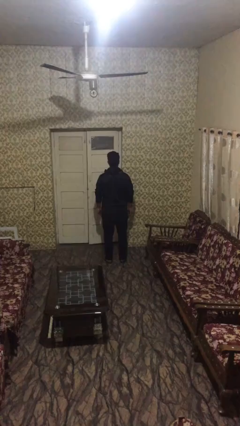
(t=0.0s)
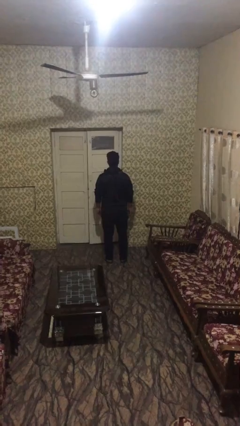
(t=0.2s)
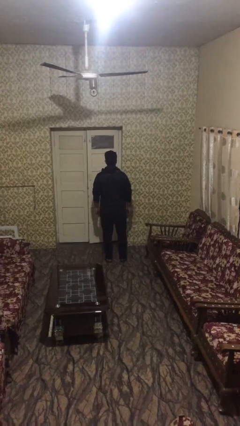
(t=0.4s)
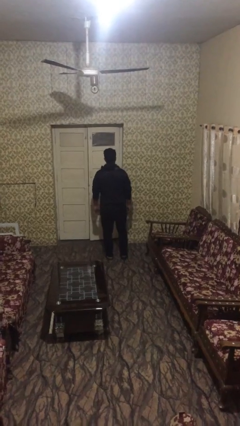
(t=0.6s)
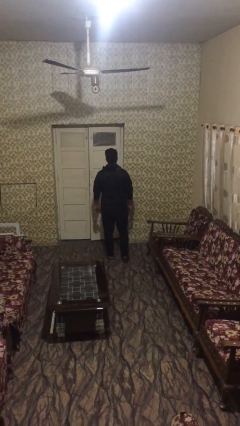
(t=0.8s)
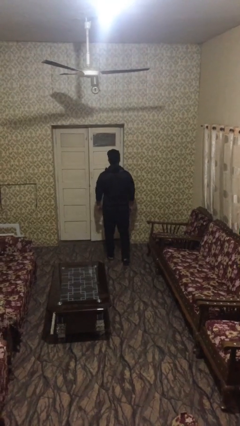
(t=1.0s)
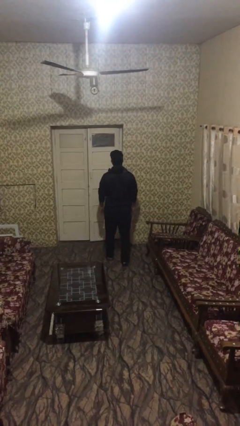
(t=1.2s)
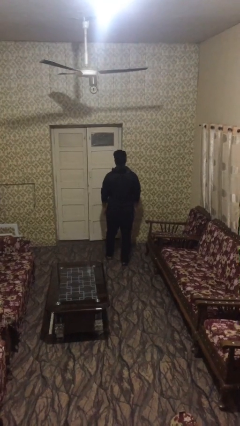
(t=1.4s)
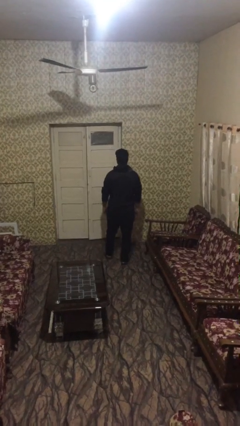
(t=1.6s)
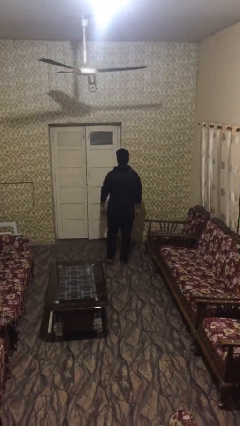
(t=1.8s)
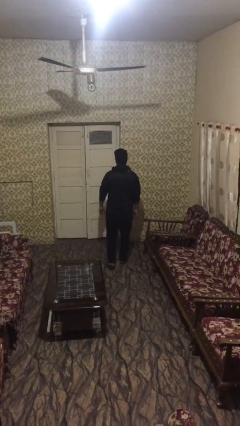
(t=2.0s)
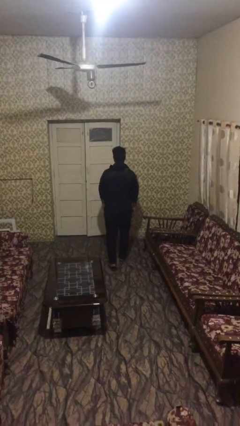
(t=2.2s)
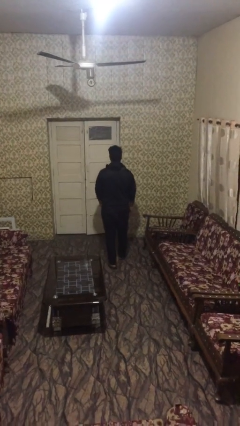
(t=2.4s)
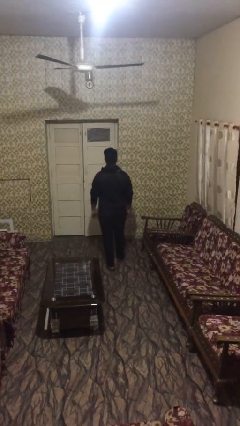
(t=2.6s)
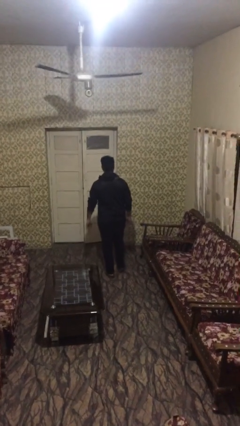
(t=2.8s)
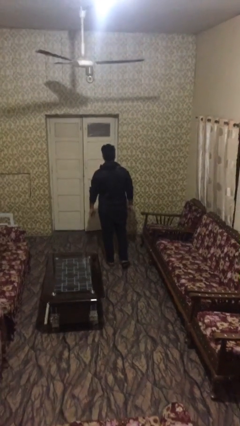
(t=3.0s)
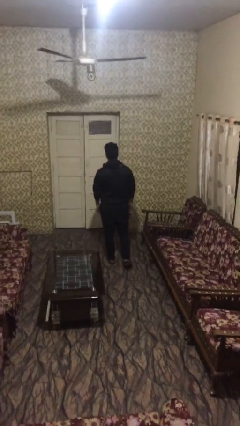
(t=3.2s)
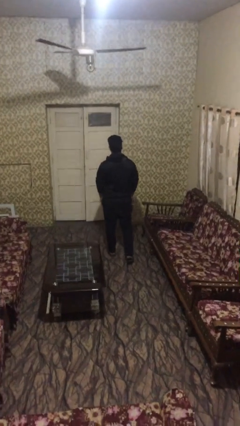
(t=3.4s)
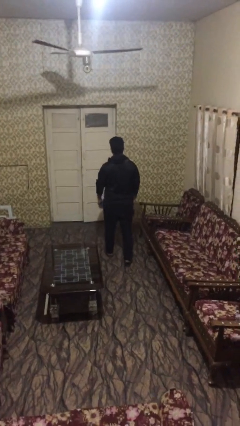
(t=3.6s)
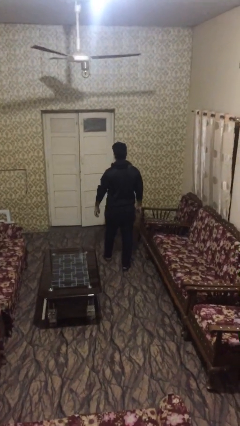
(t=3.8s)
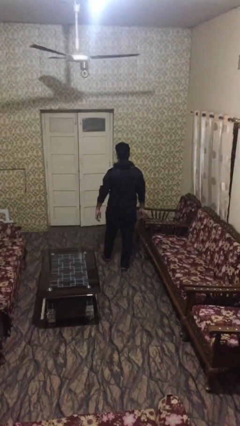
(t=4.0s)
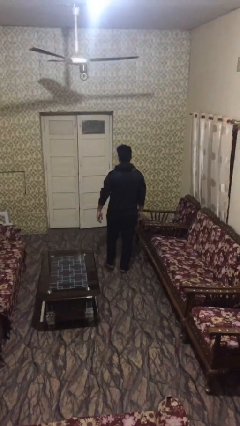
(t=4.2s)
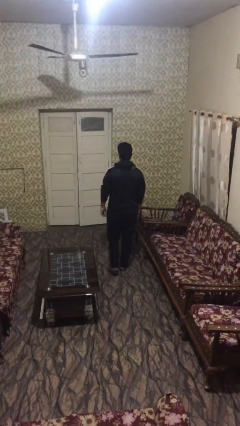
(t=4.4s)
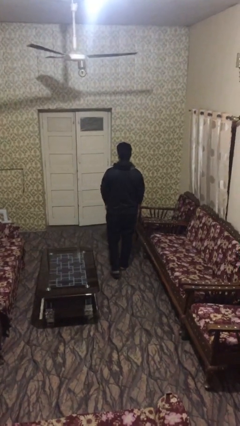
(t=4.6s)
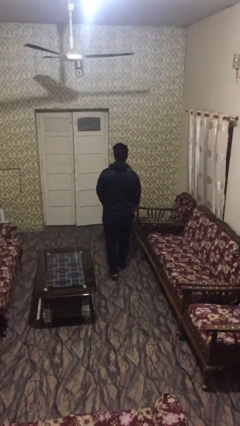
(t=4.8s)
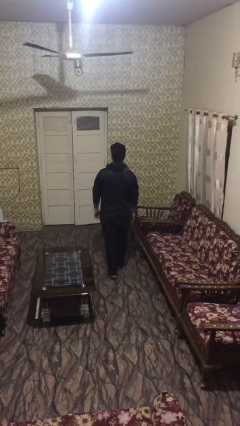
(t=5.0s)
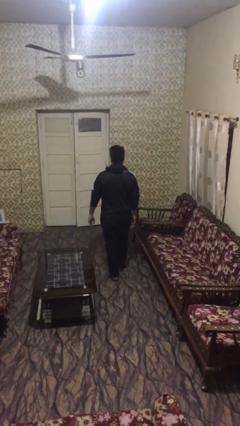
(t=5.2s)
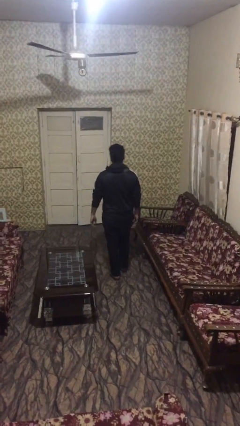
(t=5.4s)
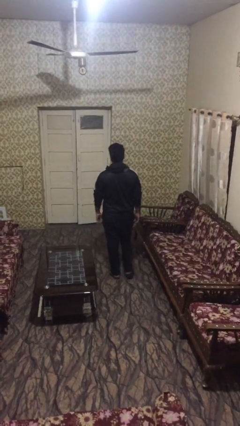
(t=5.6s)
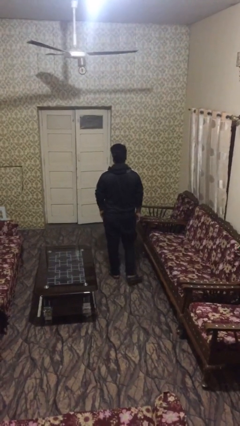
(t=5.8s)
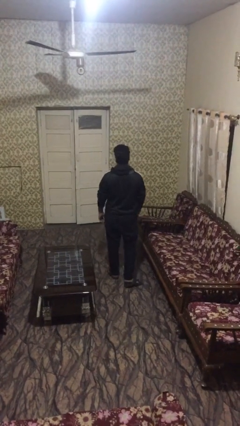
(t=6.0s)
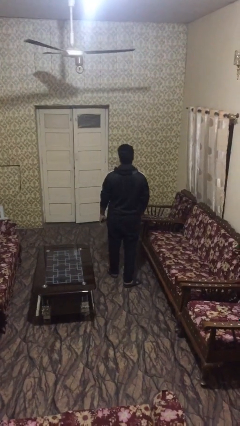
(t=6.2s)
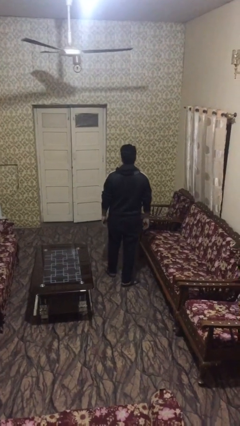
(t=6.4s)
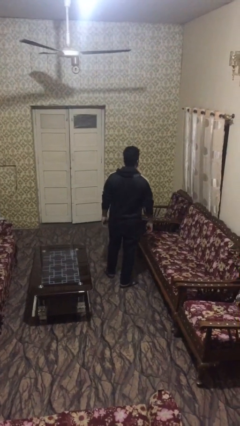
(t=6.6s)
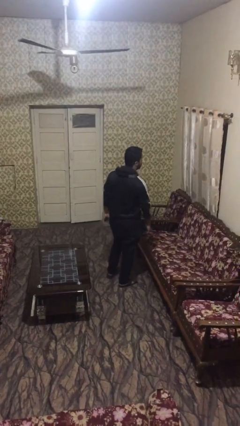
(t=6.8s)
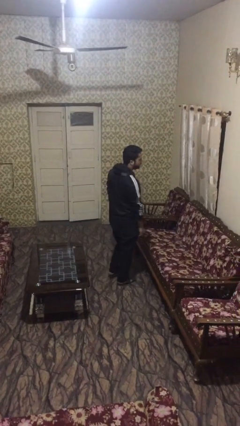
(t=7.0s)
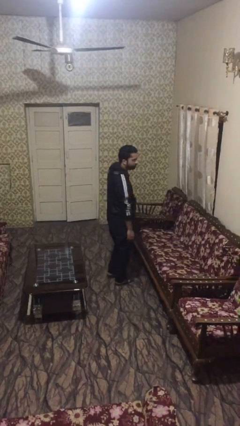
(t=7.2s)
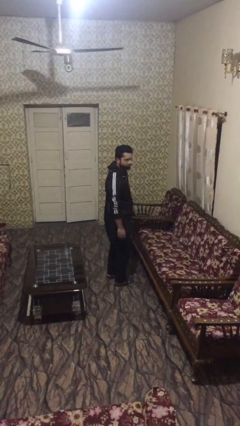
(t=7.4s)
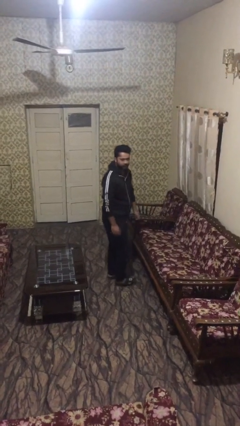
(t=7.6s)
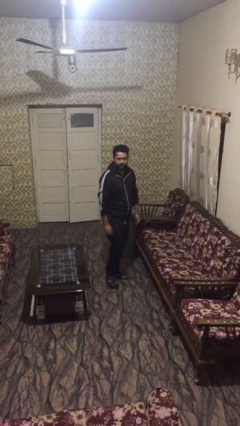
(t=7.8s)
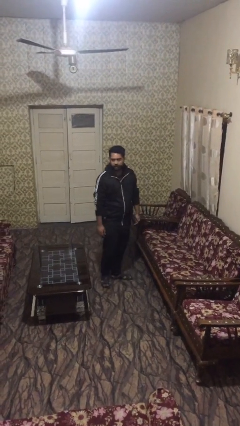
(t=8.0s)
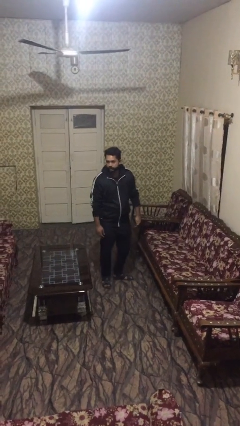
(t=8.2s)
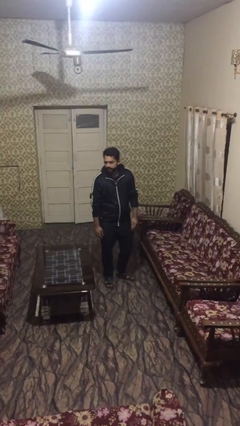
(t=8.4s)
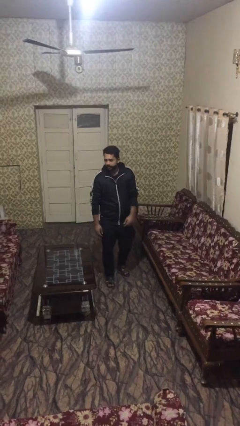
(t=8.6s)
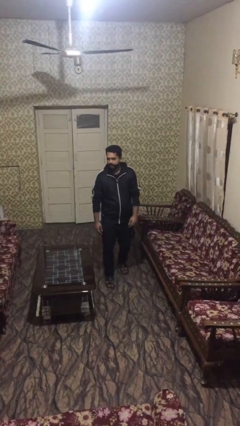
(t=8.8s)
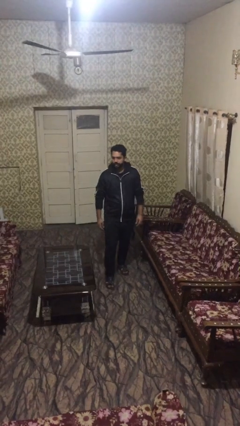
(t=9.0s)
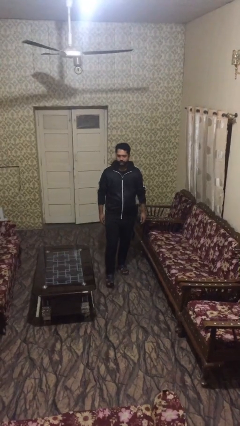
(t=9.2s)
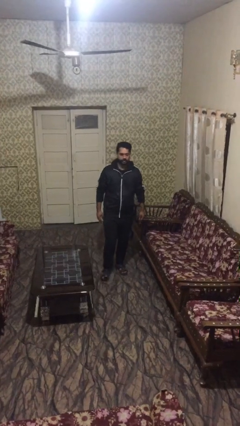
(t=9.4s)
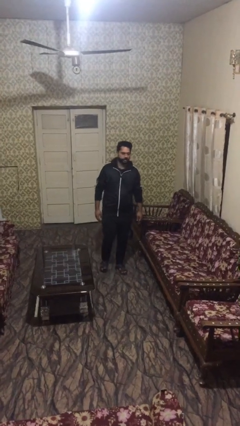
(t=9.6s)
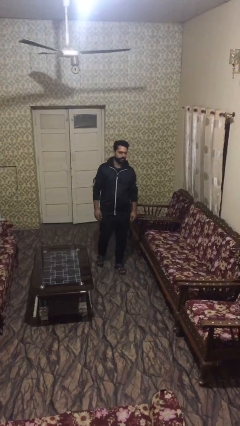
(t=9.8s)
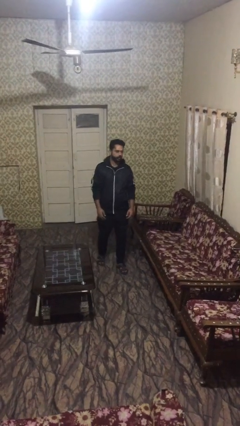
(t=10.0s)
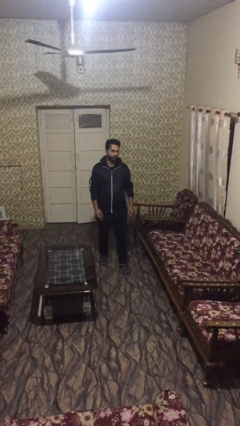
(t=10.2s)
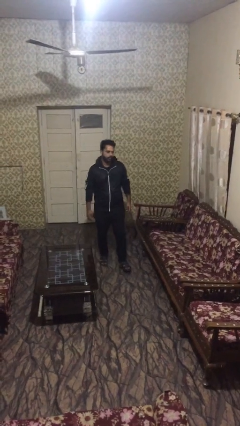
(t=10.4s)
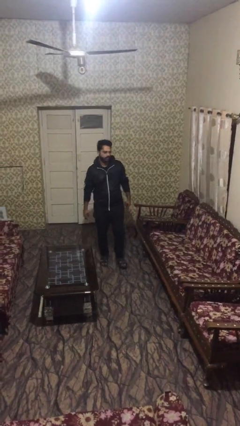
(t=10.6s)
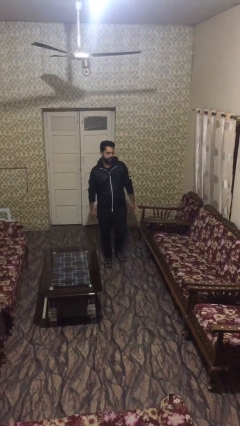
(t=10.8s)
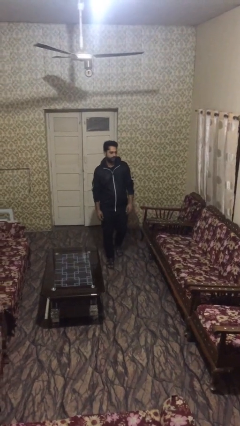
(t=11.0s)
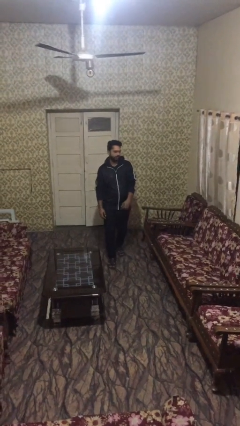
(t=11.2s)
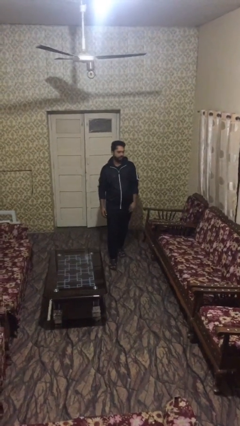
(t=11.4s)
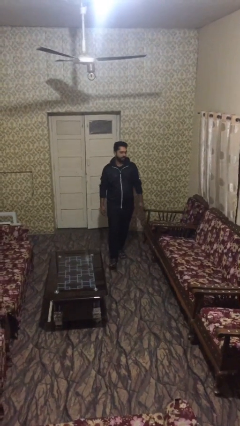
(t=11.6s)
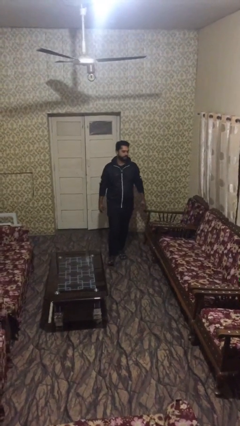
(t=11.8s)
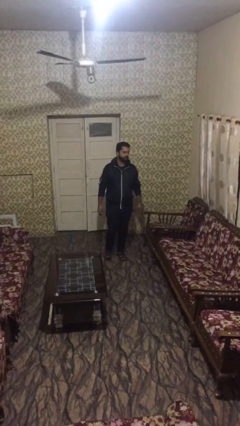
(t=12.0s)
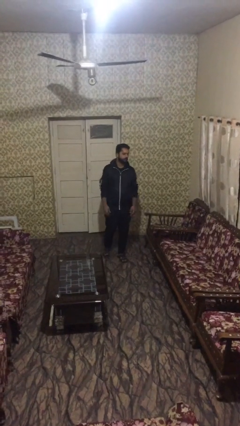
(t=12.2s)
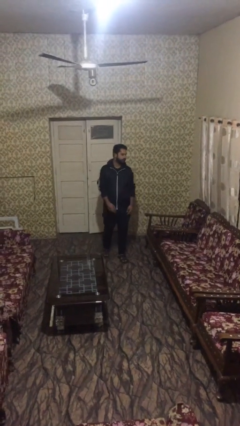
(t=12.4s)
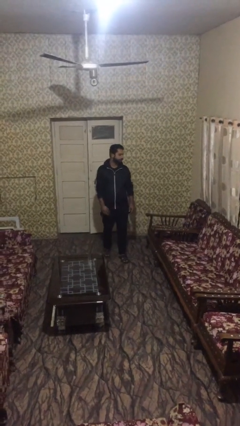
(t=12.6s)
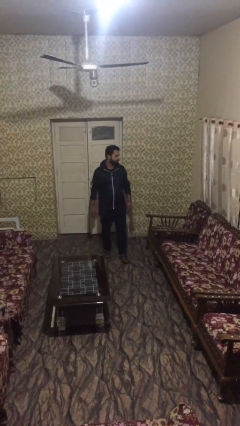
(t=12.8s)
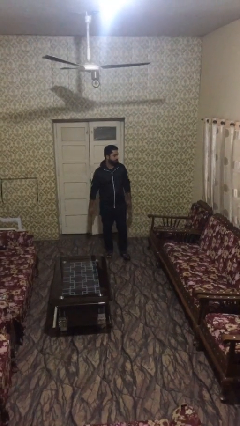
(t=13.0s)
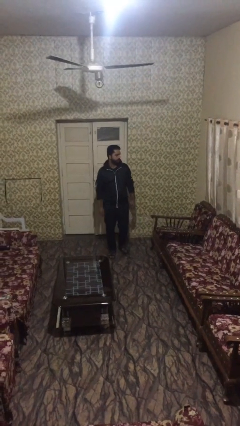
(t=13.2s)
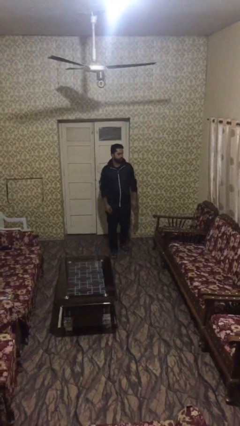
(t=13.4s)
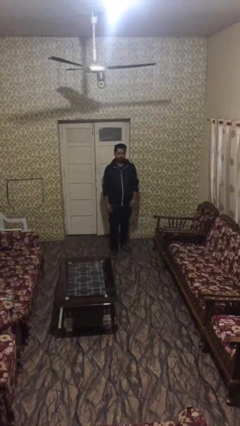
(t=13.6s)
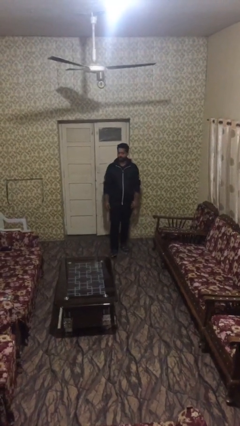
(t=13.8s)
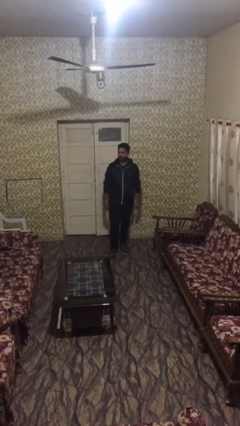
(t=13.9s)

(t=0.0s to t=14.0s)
person walks

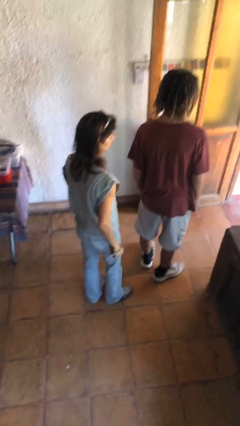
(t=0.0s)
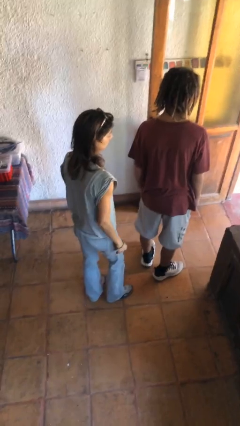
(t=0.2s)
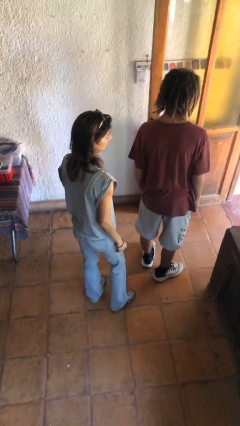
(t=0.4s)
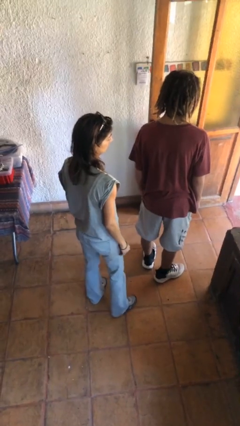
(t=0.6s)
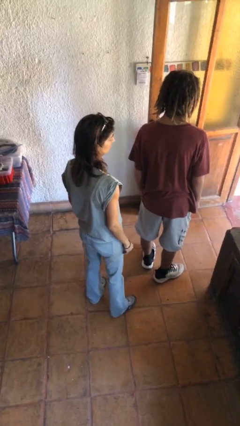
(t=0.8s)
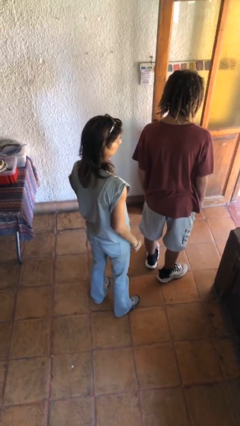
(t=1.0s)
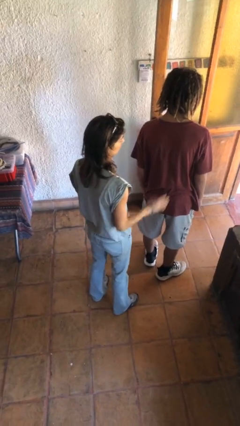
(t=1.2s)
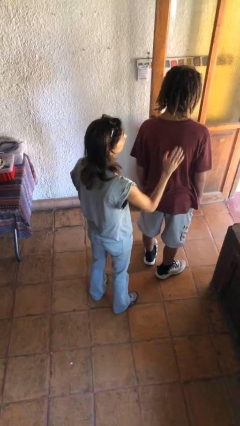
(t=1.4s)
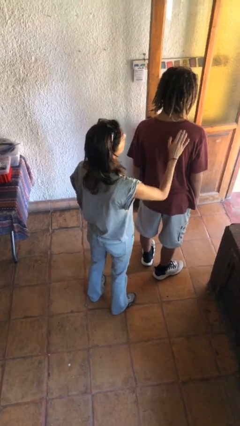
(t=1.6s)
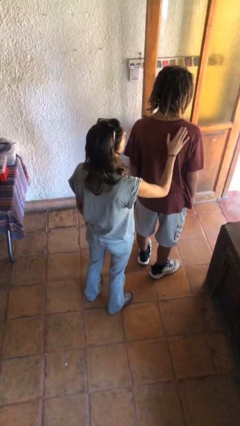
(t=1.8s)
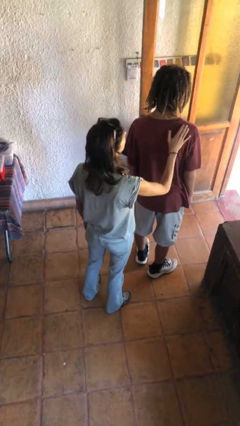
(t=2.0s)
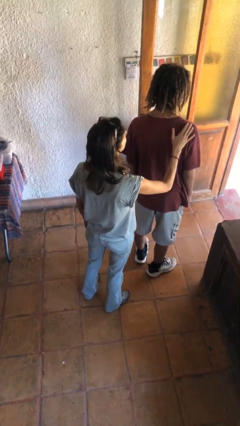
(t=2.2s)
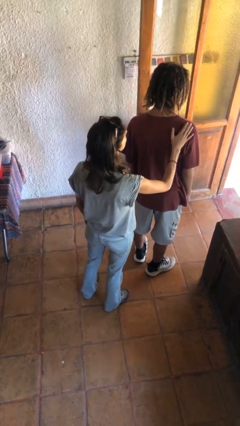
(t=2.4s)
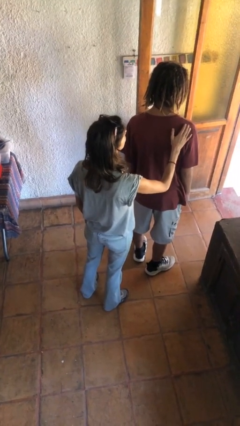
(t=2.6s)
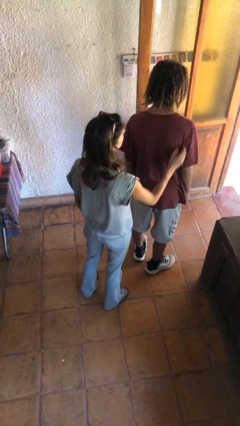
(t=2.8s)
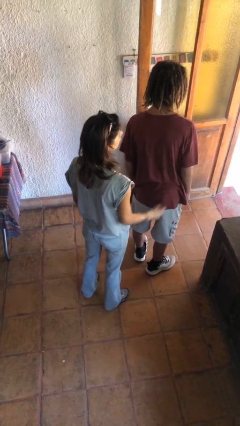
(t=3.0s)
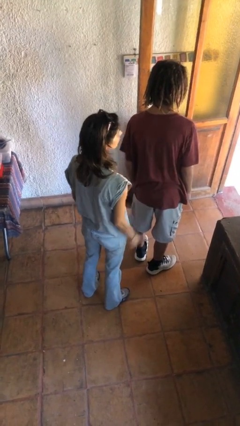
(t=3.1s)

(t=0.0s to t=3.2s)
person touches back of person

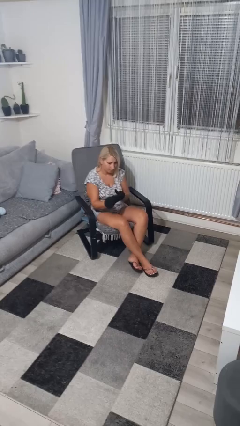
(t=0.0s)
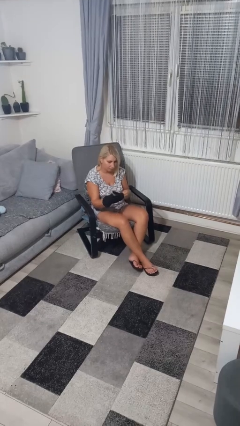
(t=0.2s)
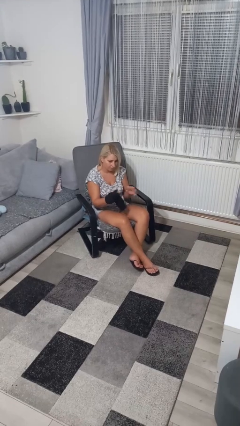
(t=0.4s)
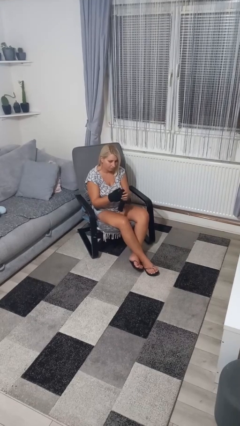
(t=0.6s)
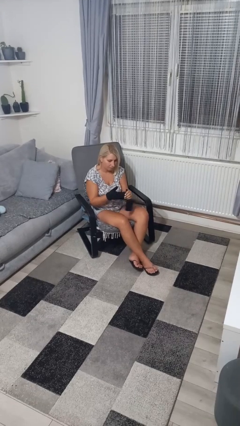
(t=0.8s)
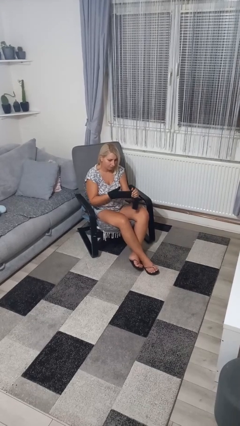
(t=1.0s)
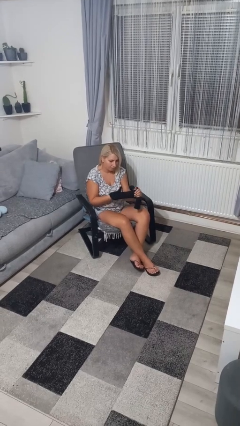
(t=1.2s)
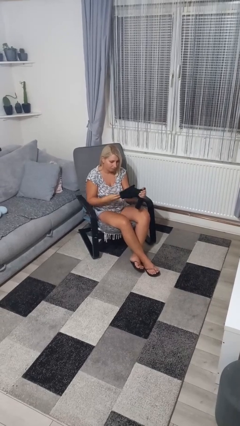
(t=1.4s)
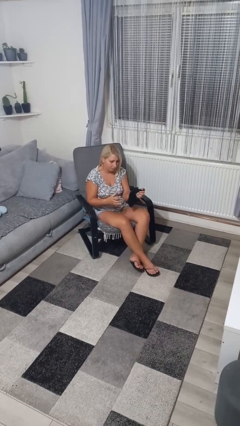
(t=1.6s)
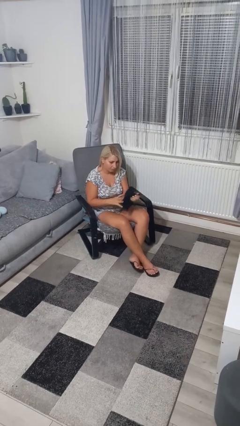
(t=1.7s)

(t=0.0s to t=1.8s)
person takes off gloves
